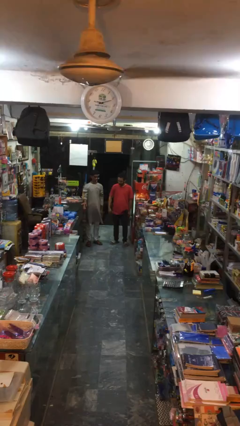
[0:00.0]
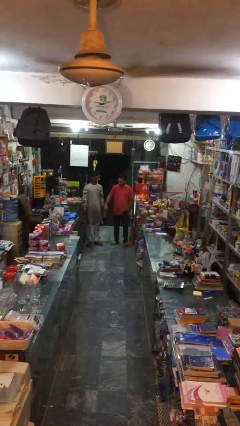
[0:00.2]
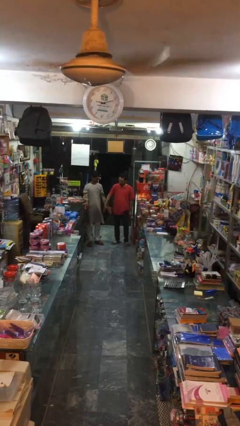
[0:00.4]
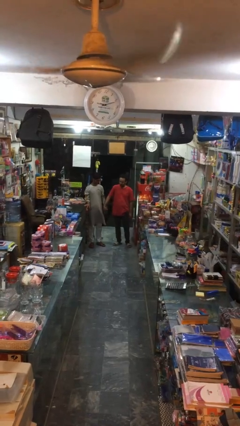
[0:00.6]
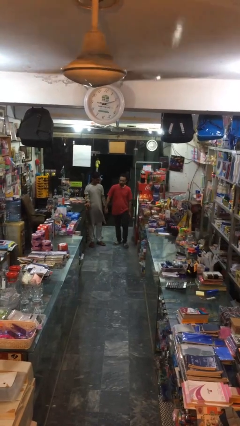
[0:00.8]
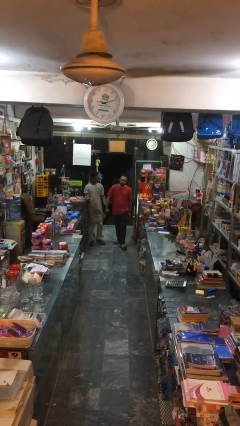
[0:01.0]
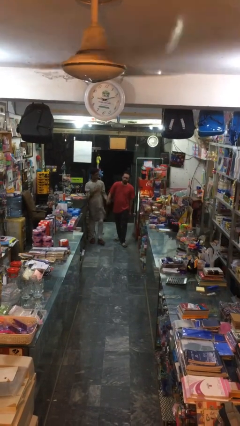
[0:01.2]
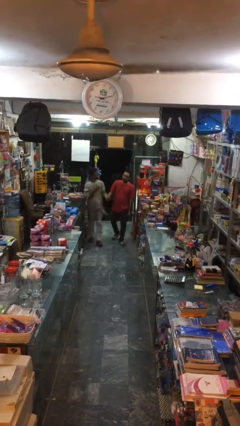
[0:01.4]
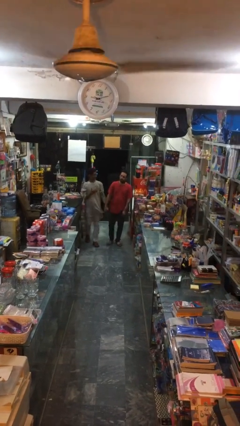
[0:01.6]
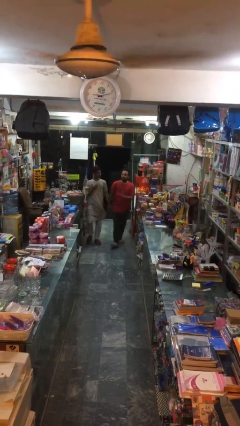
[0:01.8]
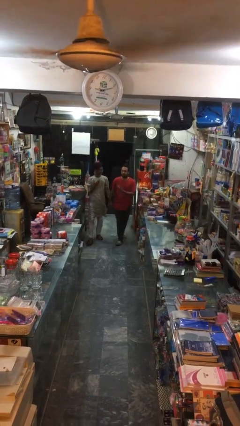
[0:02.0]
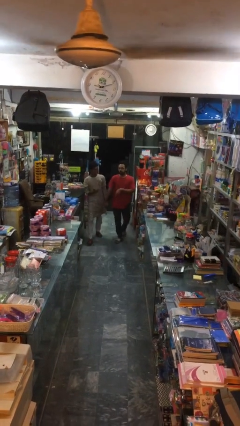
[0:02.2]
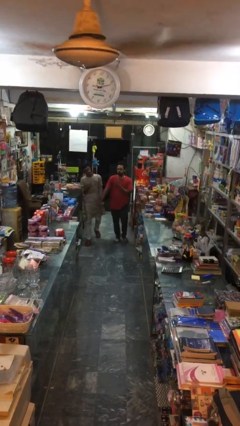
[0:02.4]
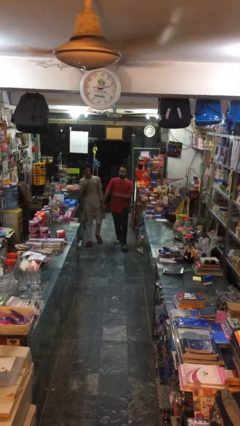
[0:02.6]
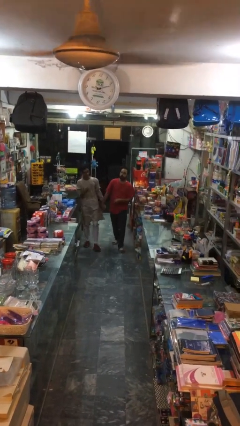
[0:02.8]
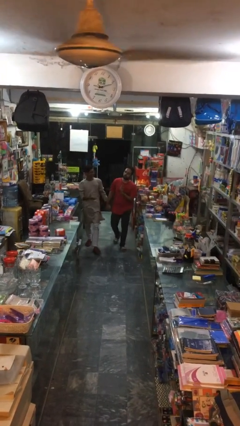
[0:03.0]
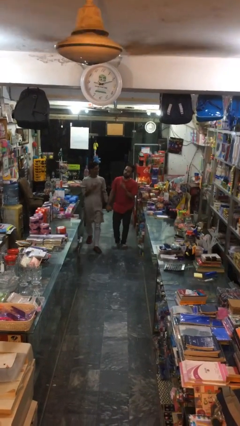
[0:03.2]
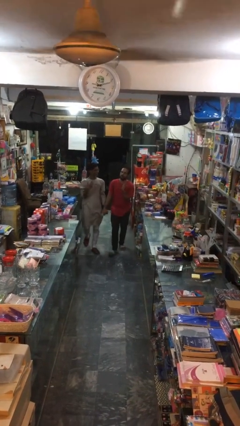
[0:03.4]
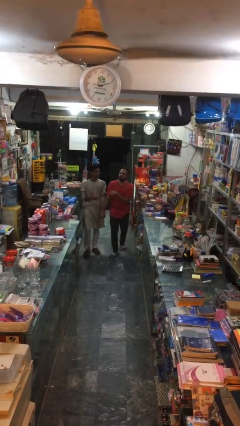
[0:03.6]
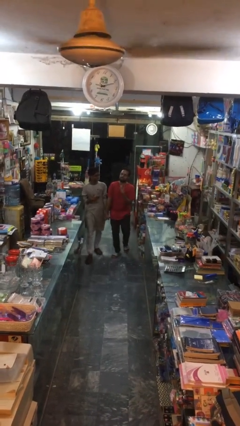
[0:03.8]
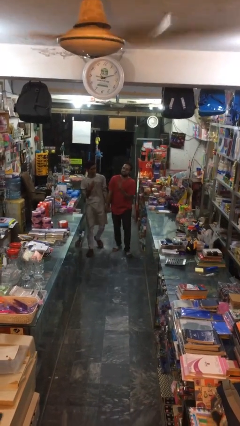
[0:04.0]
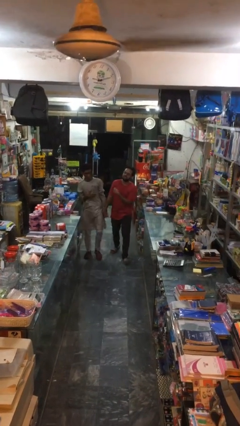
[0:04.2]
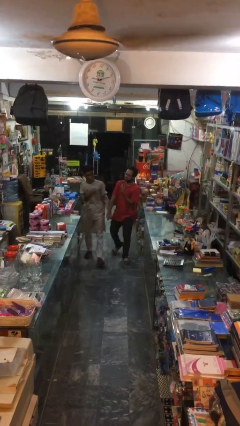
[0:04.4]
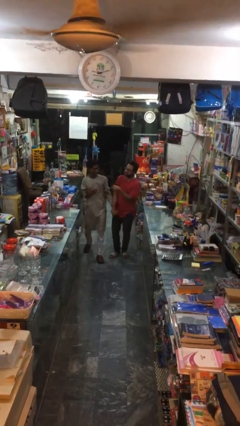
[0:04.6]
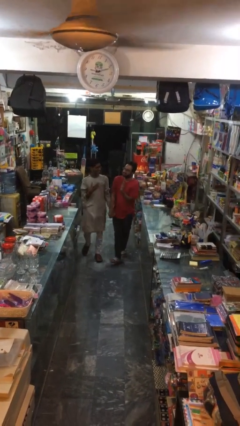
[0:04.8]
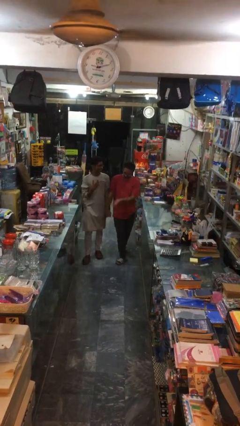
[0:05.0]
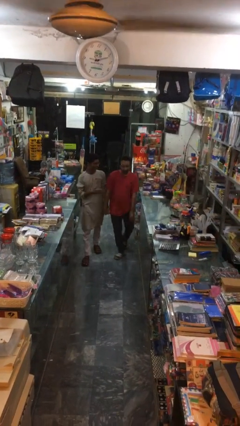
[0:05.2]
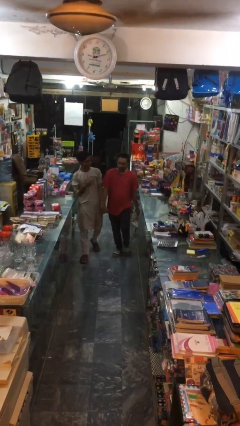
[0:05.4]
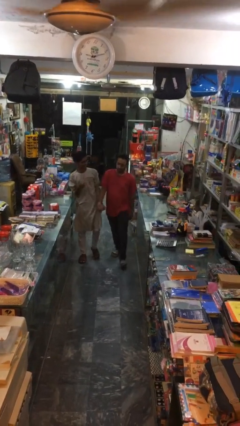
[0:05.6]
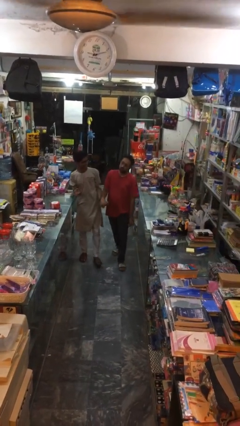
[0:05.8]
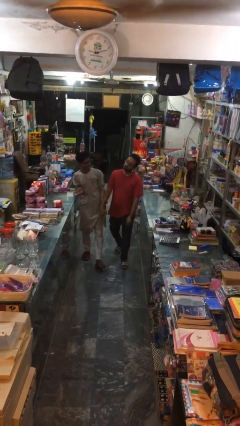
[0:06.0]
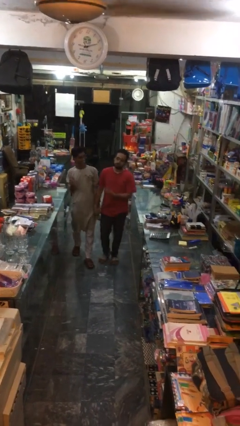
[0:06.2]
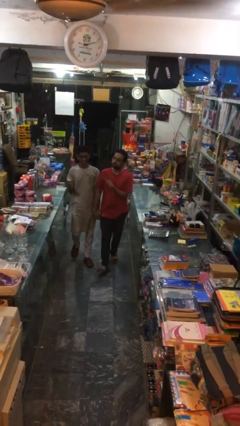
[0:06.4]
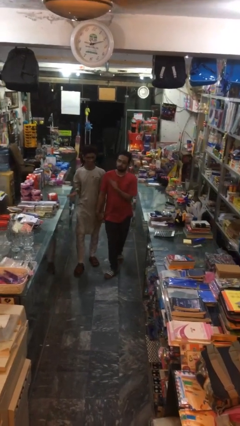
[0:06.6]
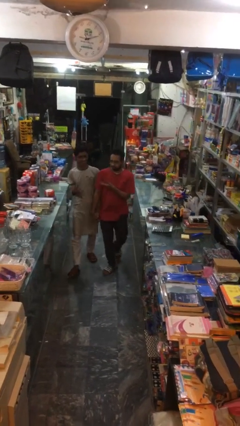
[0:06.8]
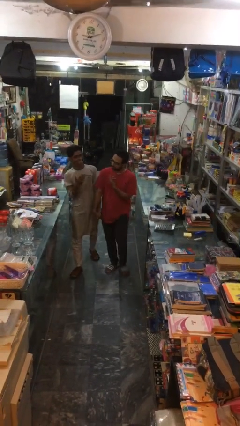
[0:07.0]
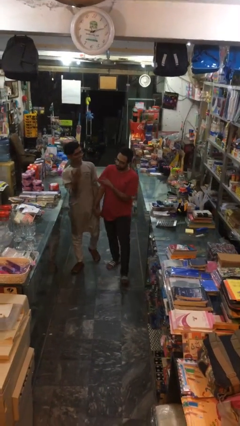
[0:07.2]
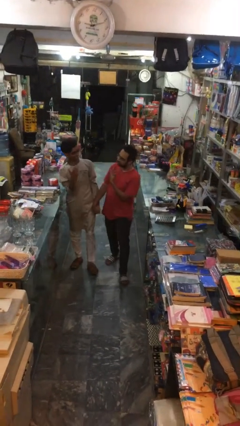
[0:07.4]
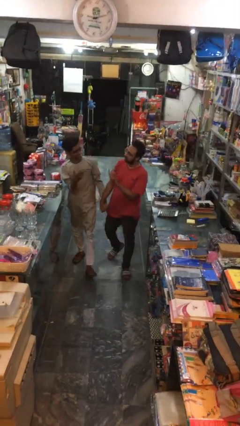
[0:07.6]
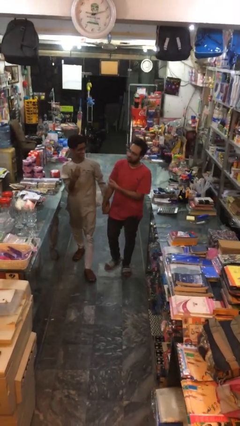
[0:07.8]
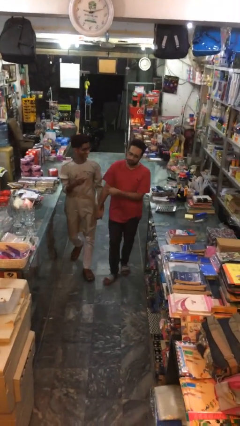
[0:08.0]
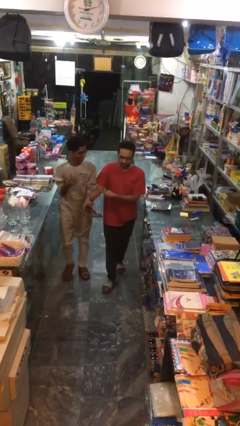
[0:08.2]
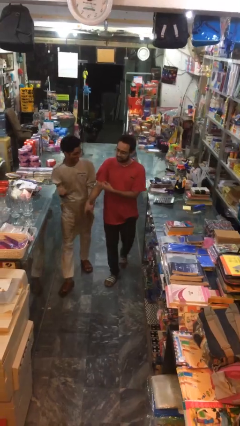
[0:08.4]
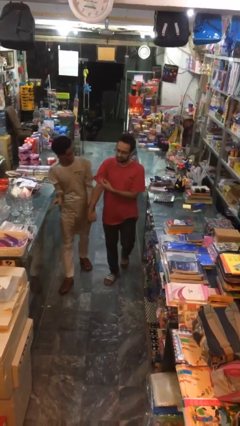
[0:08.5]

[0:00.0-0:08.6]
person holds hand

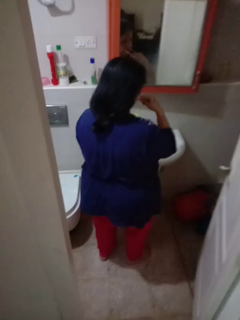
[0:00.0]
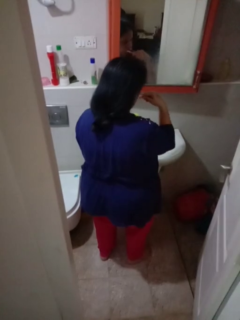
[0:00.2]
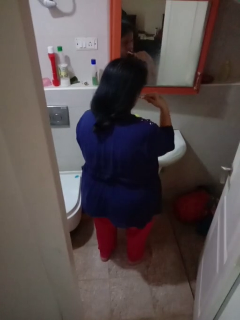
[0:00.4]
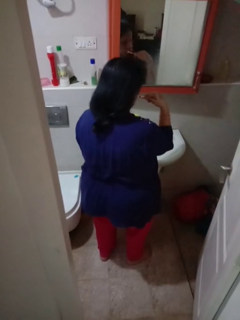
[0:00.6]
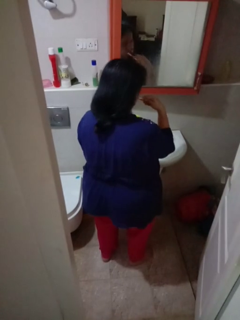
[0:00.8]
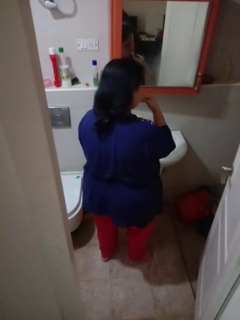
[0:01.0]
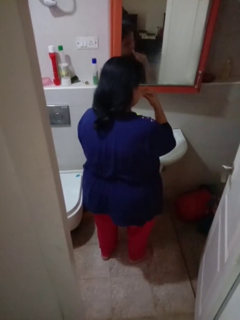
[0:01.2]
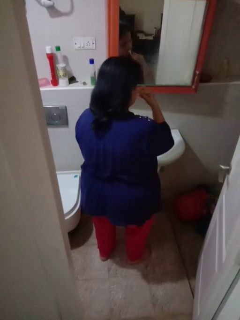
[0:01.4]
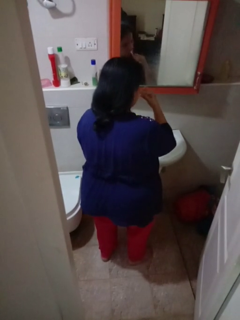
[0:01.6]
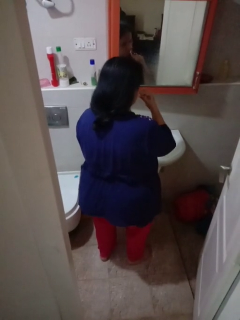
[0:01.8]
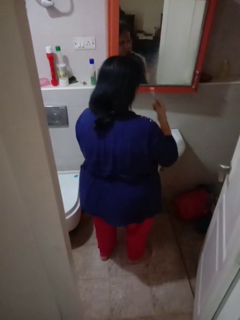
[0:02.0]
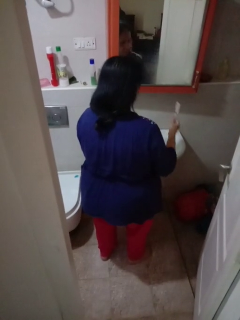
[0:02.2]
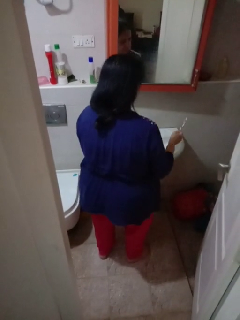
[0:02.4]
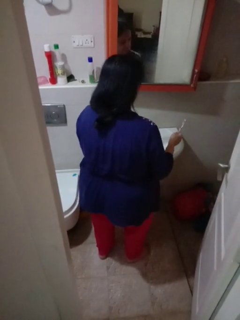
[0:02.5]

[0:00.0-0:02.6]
person brushes teeth

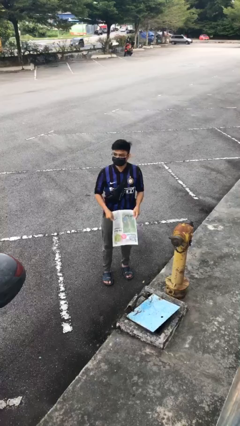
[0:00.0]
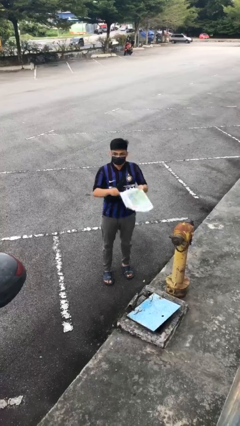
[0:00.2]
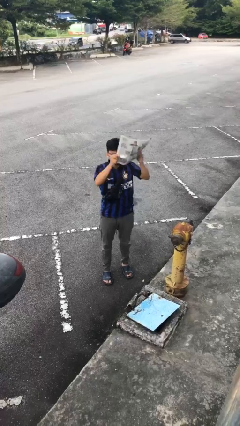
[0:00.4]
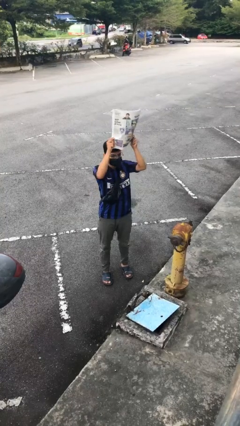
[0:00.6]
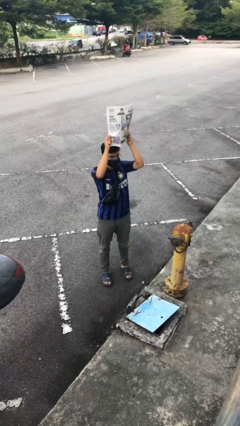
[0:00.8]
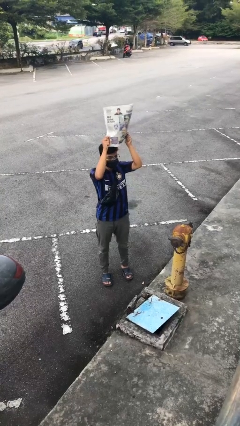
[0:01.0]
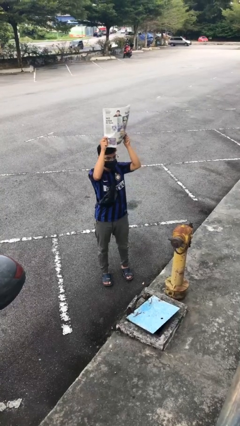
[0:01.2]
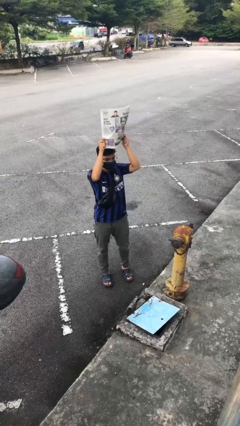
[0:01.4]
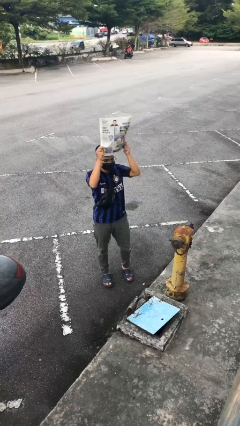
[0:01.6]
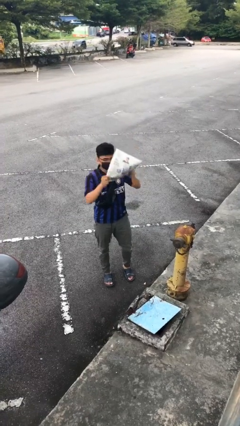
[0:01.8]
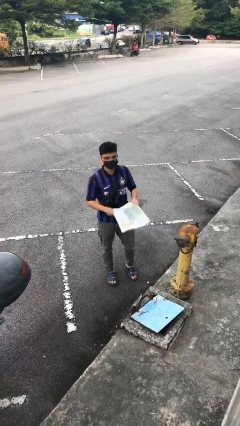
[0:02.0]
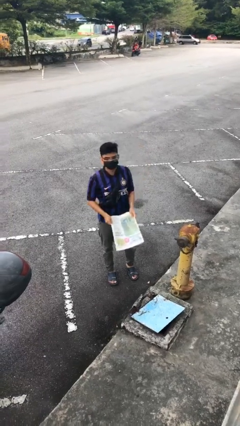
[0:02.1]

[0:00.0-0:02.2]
person holds object above head

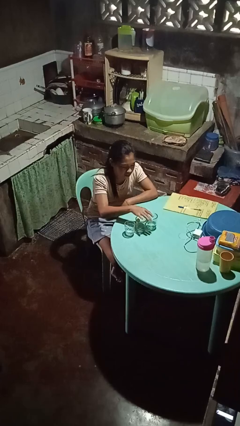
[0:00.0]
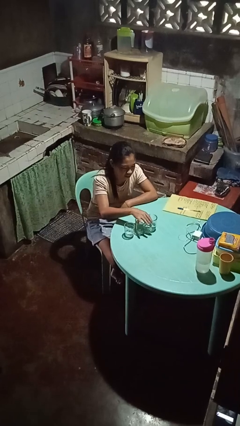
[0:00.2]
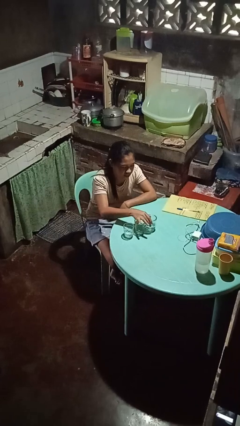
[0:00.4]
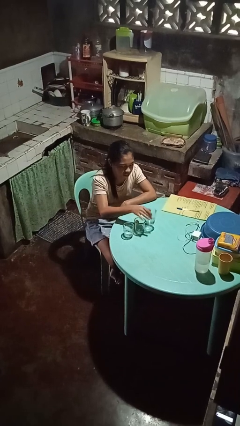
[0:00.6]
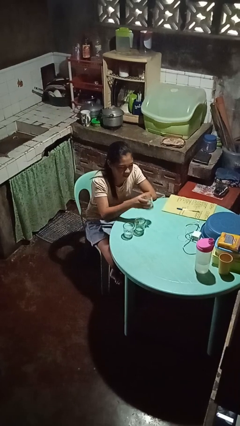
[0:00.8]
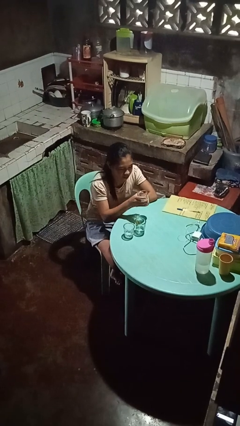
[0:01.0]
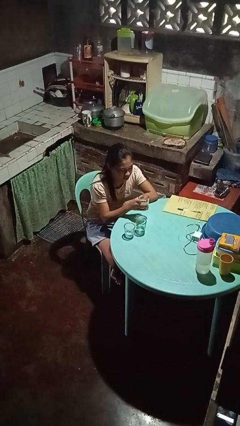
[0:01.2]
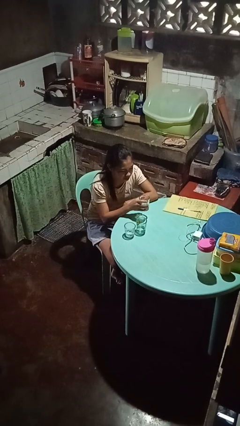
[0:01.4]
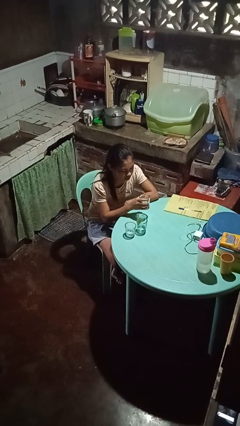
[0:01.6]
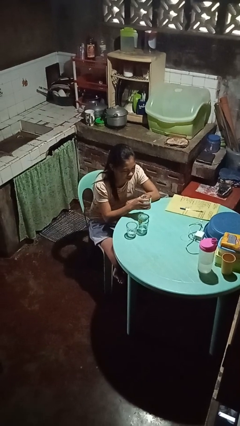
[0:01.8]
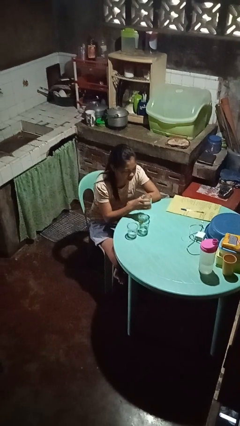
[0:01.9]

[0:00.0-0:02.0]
person picks up object from table

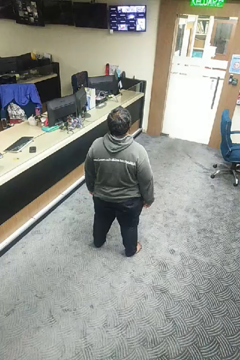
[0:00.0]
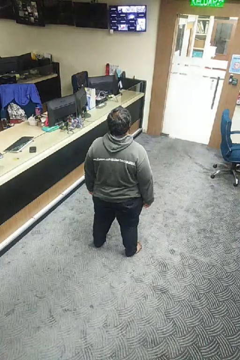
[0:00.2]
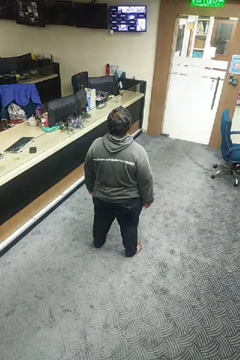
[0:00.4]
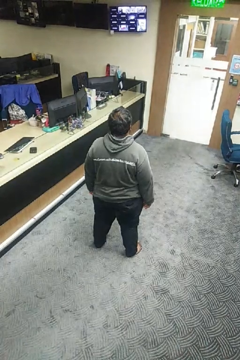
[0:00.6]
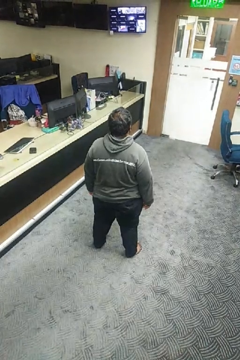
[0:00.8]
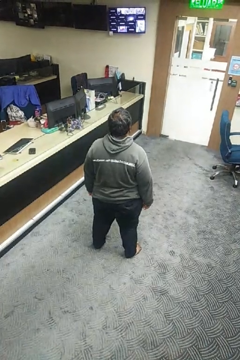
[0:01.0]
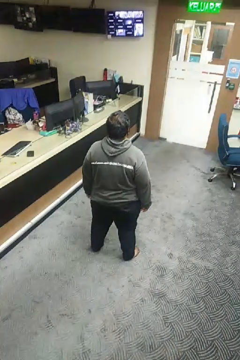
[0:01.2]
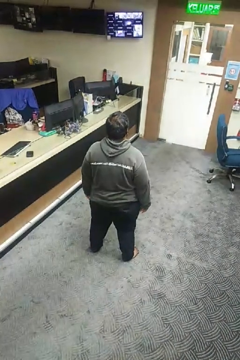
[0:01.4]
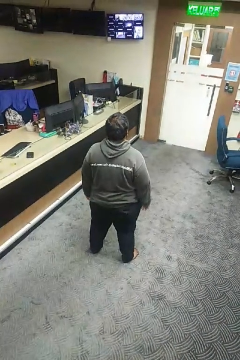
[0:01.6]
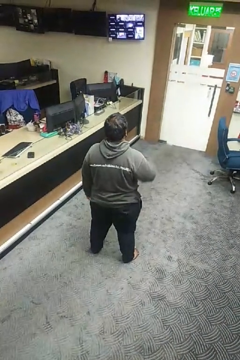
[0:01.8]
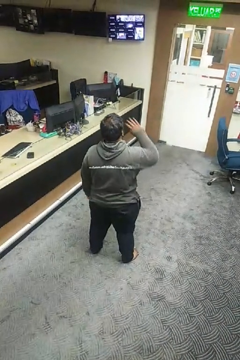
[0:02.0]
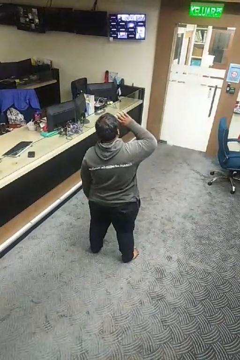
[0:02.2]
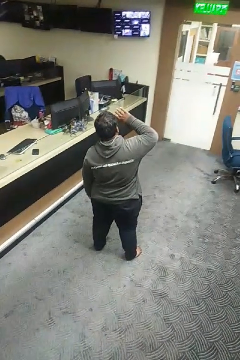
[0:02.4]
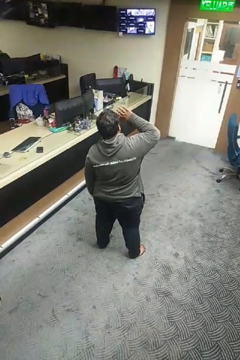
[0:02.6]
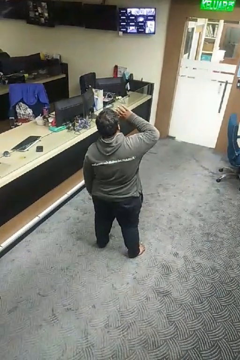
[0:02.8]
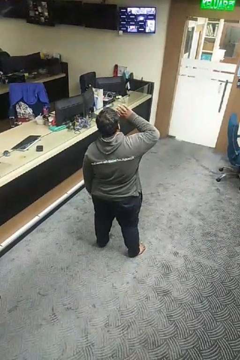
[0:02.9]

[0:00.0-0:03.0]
person shades eyes

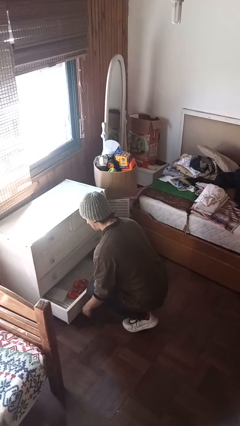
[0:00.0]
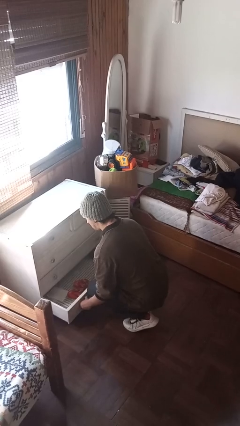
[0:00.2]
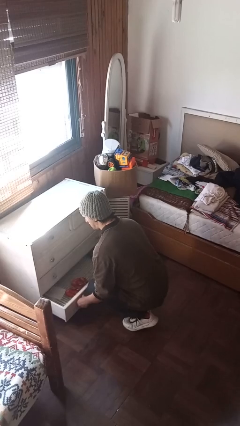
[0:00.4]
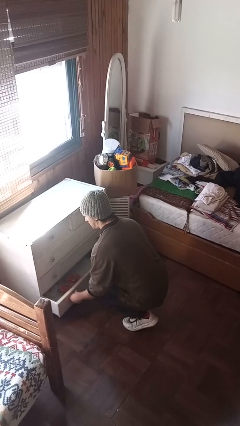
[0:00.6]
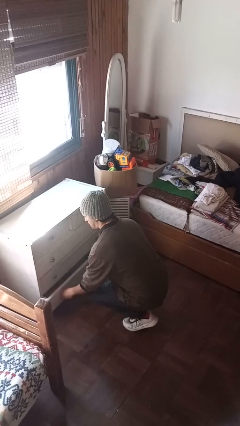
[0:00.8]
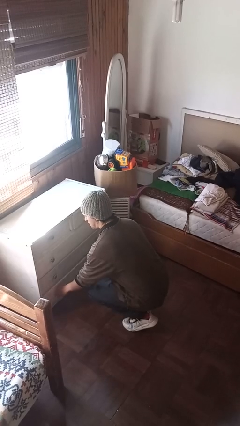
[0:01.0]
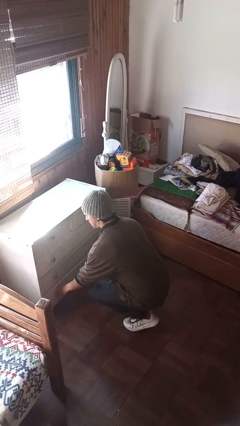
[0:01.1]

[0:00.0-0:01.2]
person closes dresser drawer
